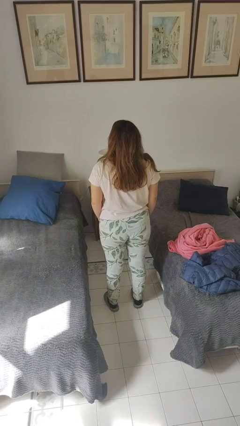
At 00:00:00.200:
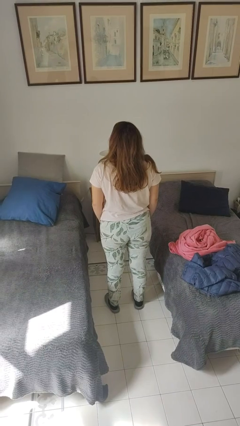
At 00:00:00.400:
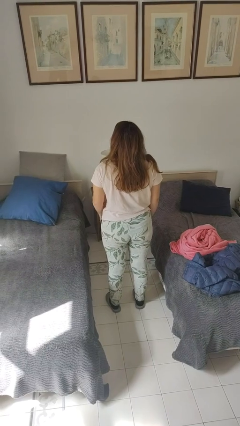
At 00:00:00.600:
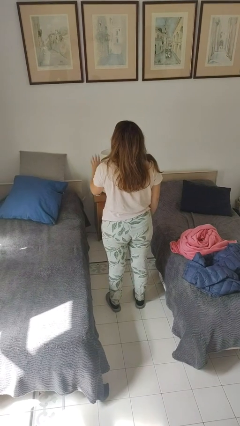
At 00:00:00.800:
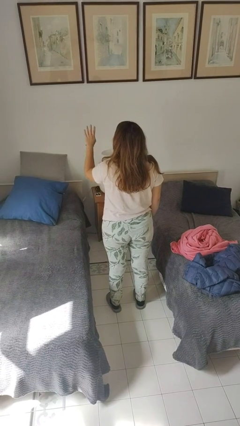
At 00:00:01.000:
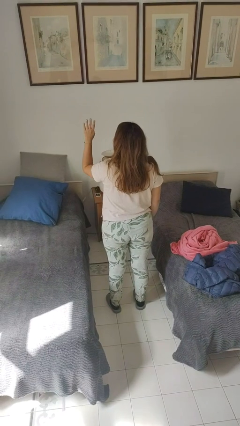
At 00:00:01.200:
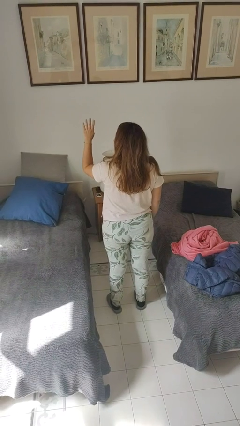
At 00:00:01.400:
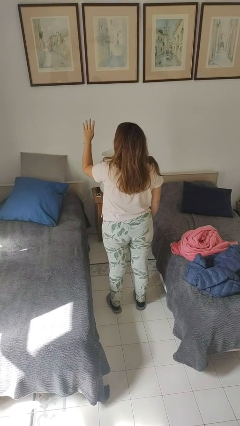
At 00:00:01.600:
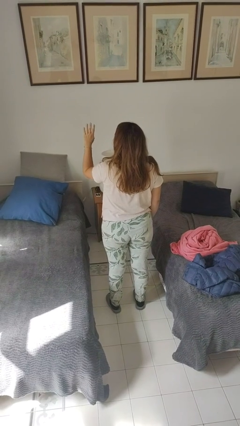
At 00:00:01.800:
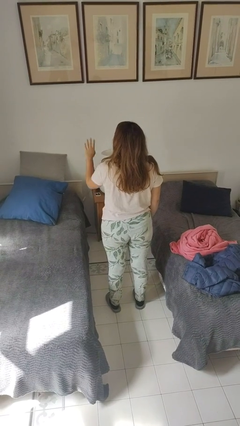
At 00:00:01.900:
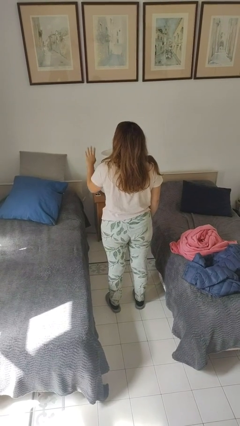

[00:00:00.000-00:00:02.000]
person gestures number four

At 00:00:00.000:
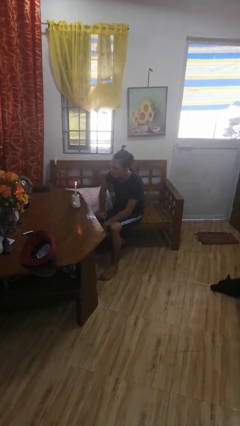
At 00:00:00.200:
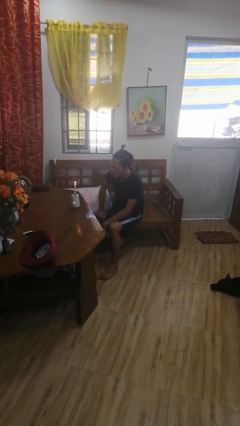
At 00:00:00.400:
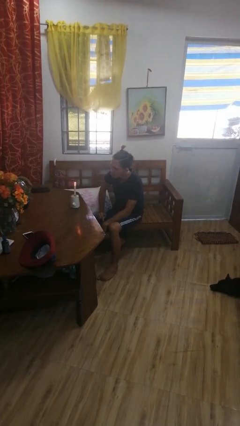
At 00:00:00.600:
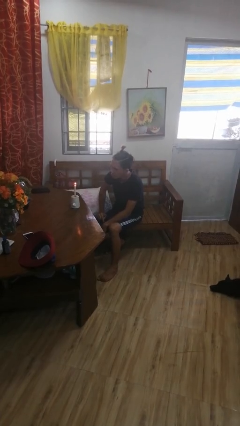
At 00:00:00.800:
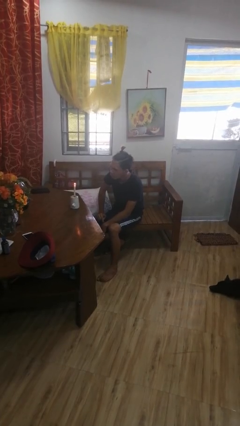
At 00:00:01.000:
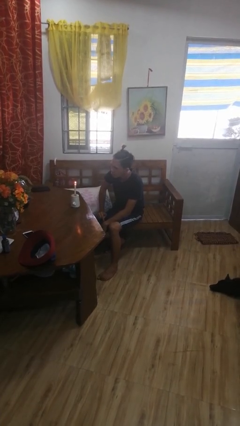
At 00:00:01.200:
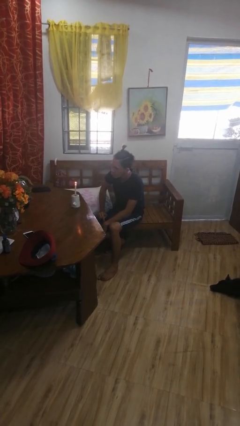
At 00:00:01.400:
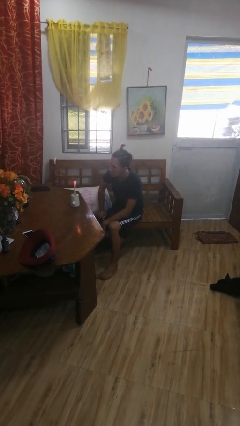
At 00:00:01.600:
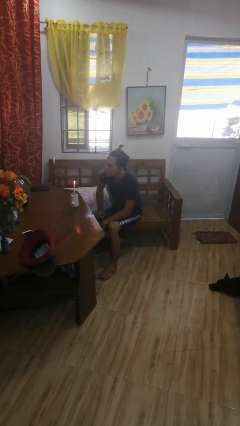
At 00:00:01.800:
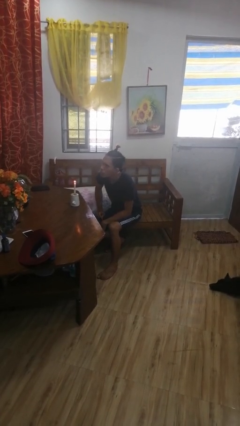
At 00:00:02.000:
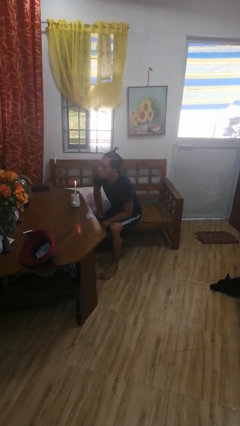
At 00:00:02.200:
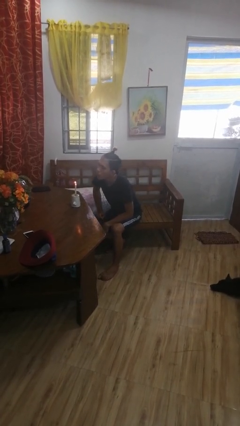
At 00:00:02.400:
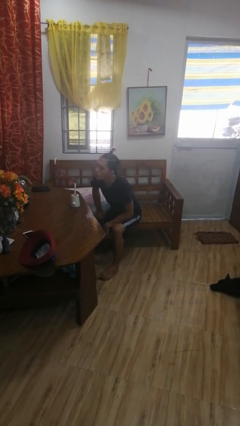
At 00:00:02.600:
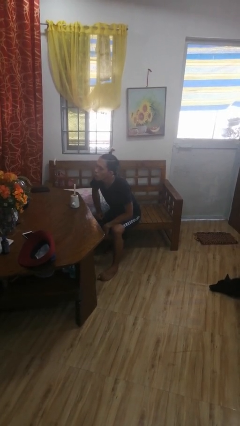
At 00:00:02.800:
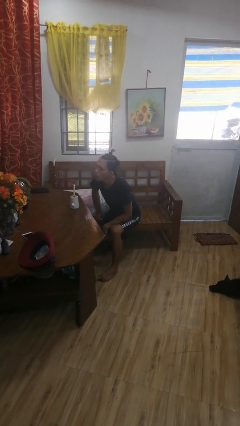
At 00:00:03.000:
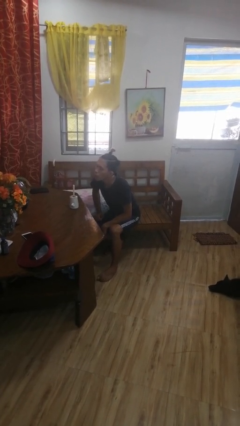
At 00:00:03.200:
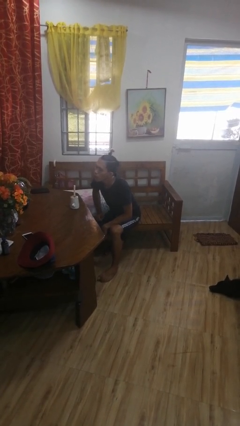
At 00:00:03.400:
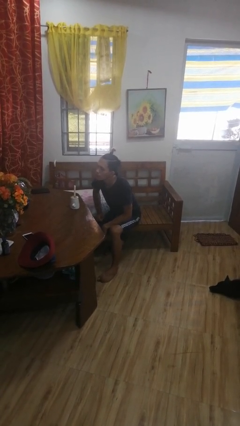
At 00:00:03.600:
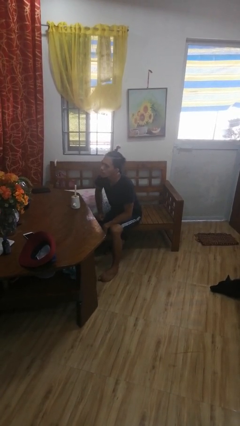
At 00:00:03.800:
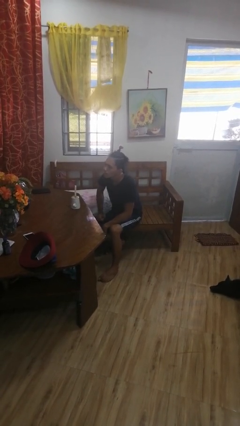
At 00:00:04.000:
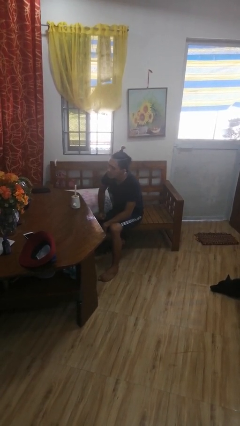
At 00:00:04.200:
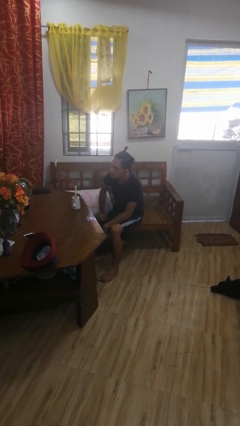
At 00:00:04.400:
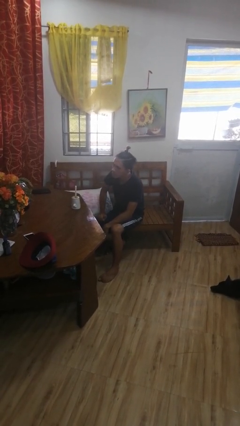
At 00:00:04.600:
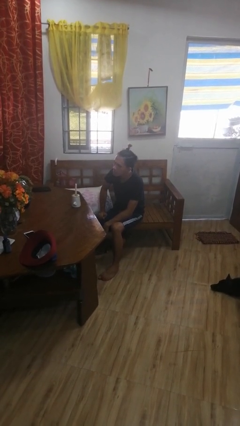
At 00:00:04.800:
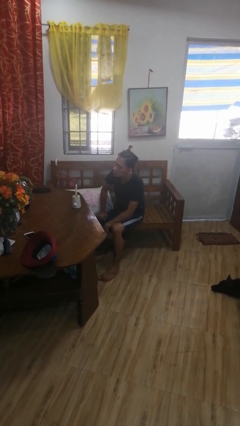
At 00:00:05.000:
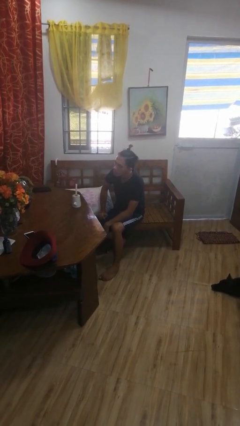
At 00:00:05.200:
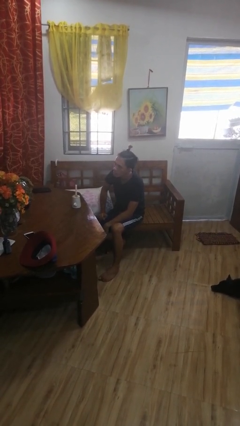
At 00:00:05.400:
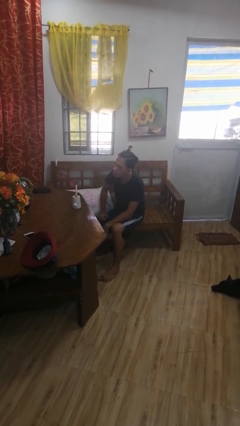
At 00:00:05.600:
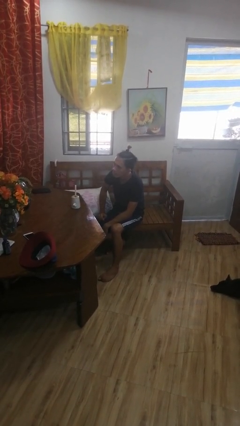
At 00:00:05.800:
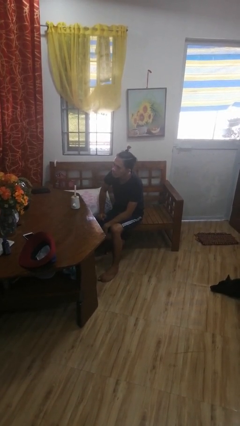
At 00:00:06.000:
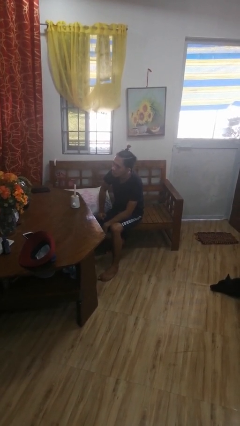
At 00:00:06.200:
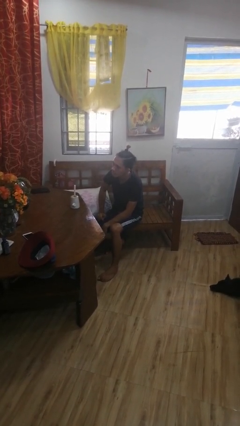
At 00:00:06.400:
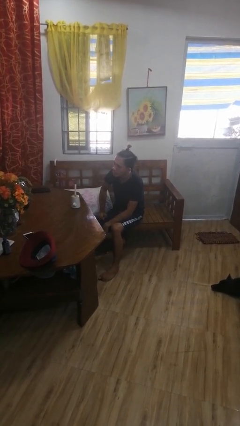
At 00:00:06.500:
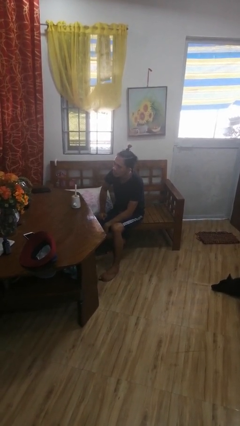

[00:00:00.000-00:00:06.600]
person extinguishes candle

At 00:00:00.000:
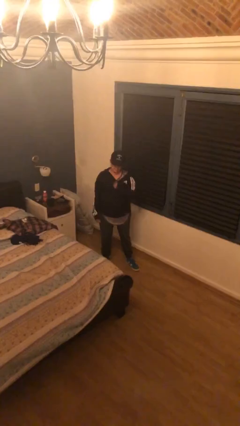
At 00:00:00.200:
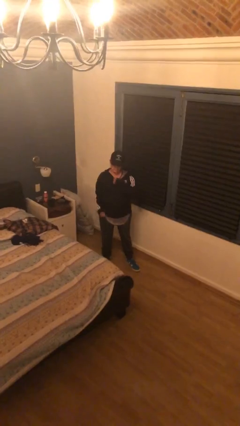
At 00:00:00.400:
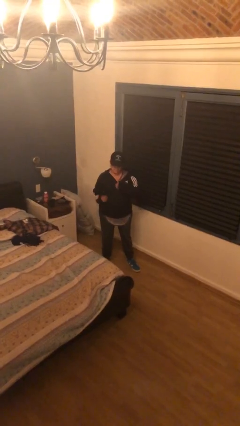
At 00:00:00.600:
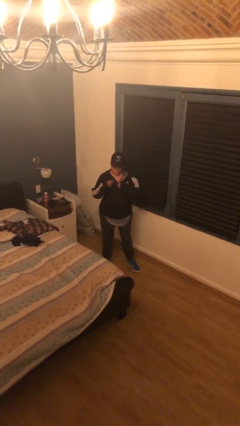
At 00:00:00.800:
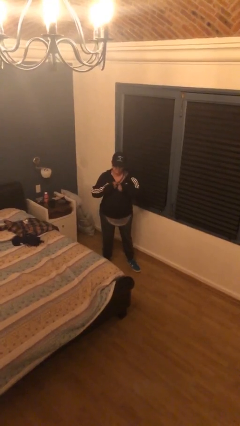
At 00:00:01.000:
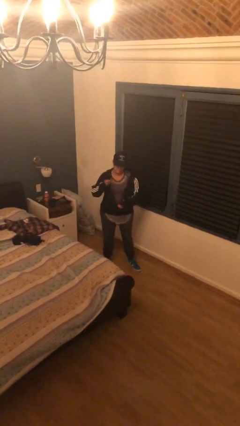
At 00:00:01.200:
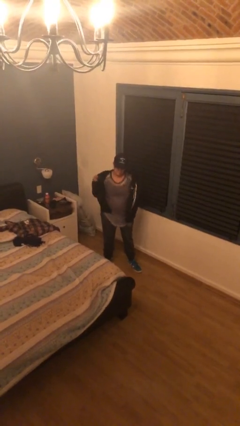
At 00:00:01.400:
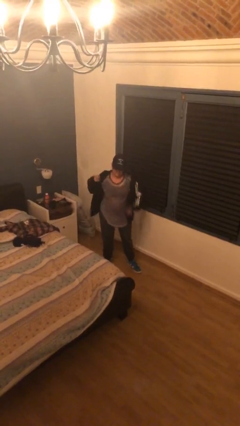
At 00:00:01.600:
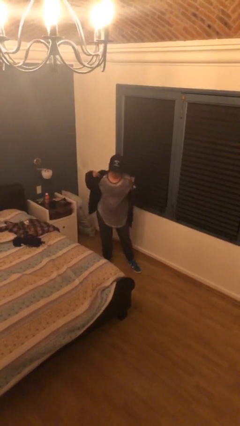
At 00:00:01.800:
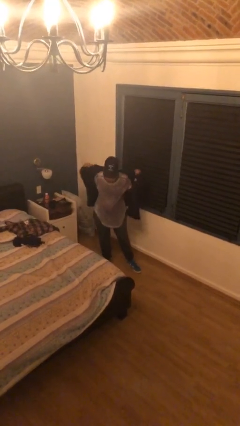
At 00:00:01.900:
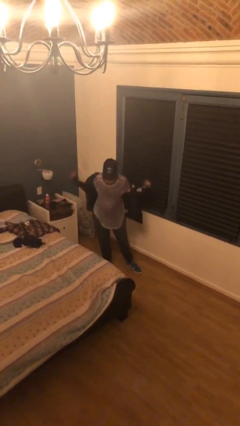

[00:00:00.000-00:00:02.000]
person unzips jacket

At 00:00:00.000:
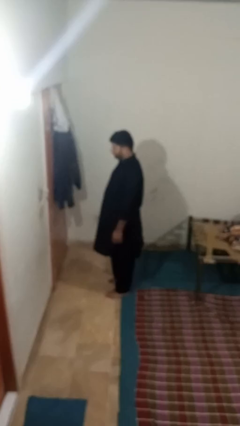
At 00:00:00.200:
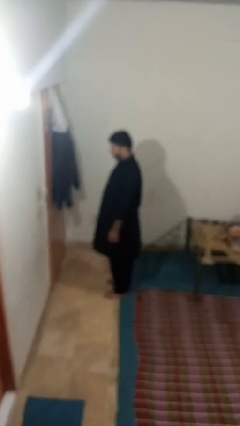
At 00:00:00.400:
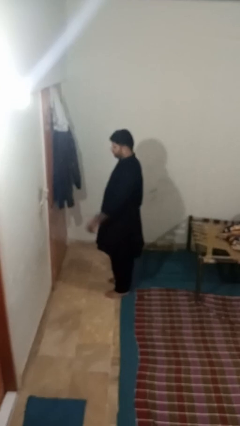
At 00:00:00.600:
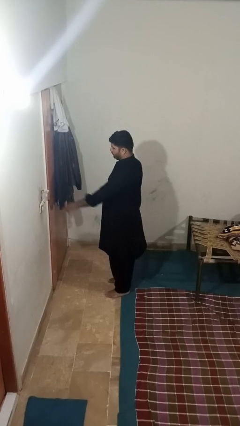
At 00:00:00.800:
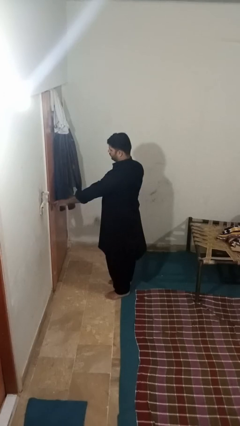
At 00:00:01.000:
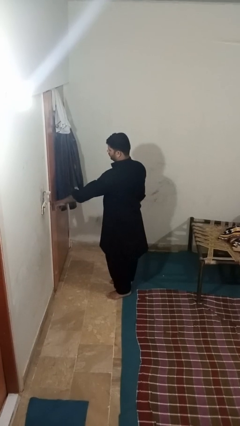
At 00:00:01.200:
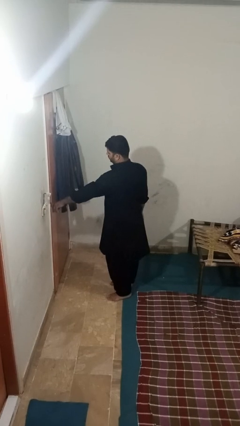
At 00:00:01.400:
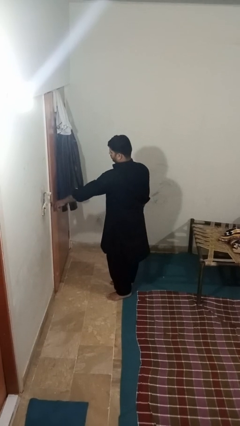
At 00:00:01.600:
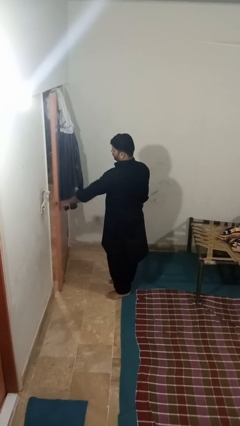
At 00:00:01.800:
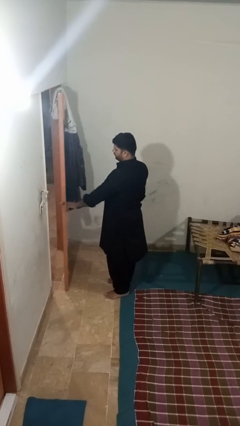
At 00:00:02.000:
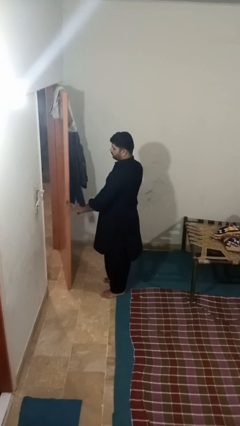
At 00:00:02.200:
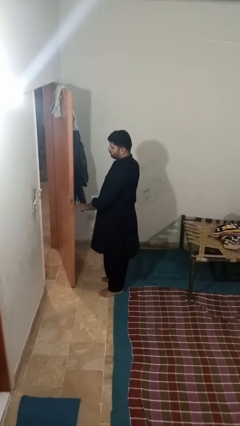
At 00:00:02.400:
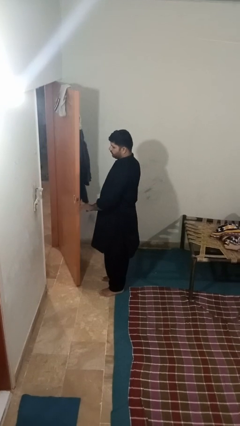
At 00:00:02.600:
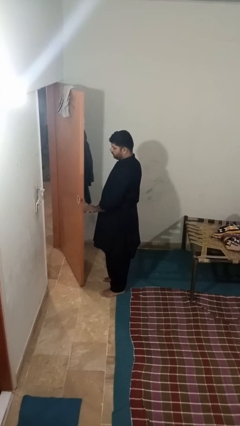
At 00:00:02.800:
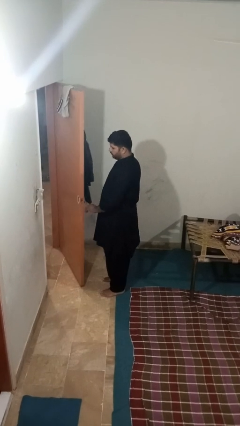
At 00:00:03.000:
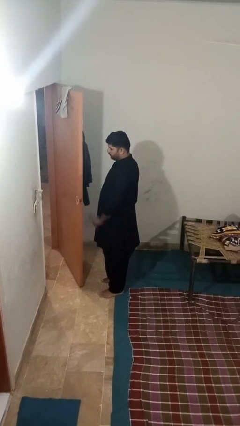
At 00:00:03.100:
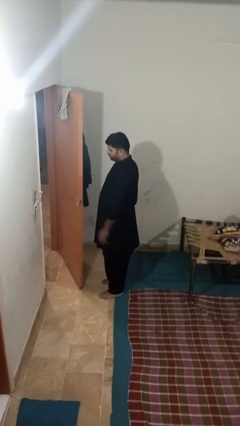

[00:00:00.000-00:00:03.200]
person opens facility door

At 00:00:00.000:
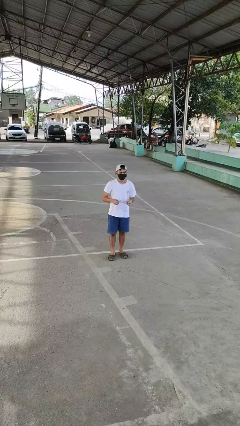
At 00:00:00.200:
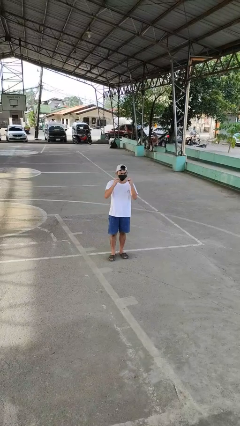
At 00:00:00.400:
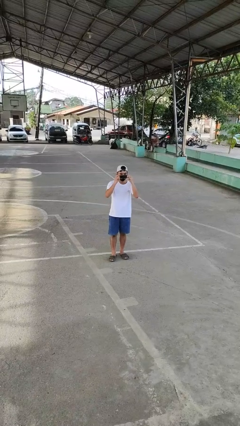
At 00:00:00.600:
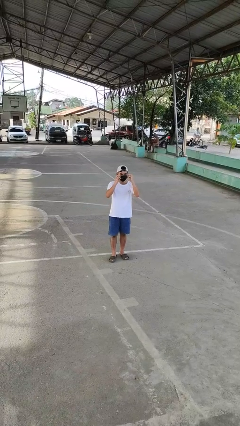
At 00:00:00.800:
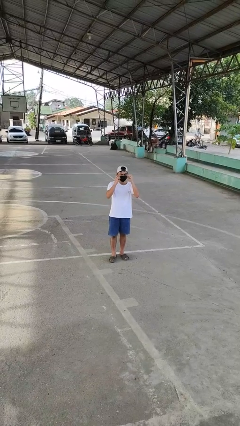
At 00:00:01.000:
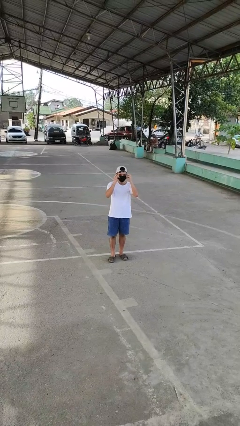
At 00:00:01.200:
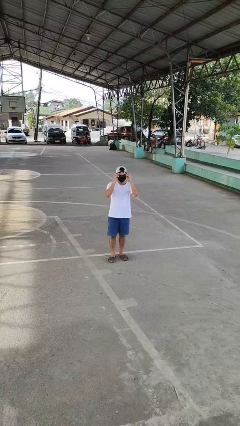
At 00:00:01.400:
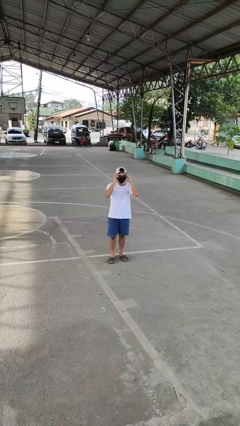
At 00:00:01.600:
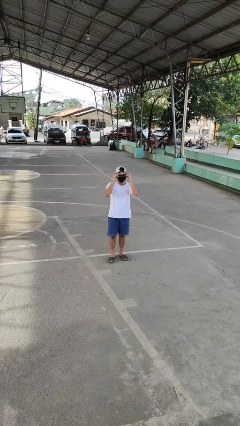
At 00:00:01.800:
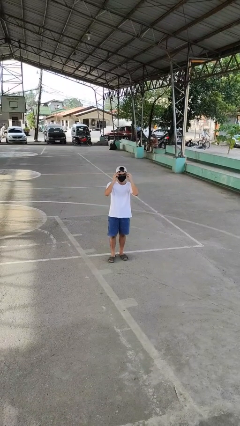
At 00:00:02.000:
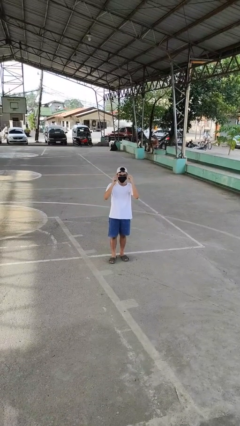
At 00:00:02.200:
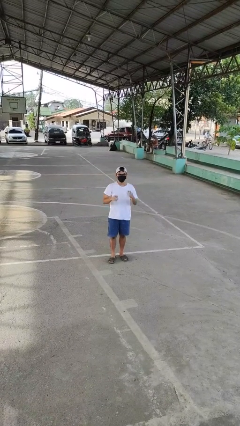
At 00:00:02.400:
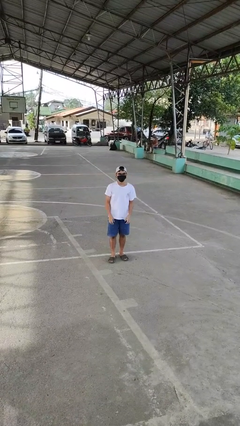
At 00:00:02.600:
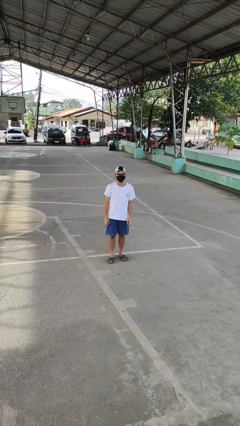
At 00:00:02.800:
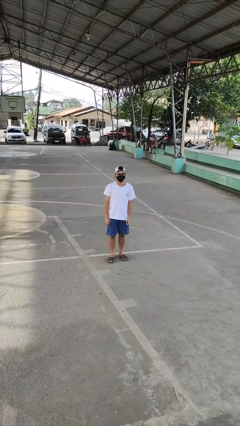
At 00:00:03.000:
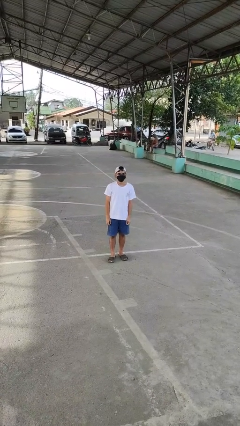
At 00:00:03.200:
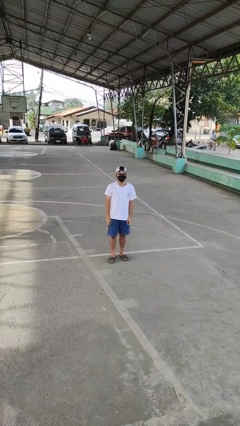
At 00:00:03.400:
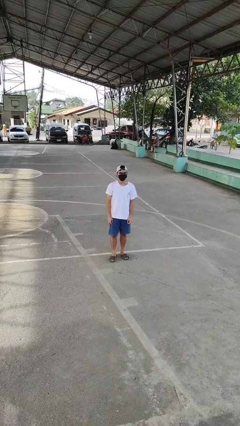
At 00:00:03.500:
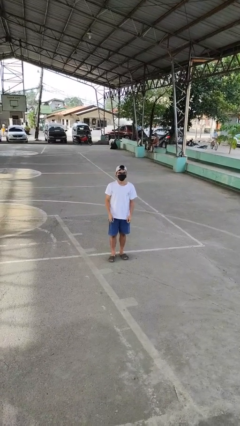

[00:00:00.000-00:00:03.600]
person puts on glasses

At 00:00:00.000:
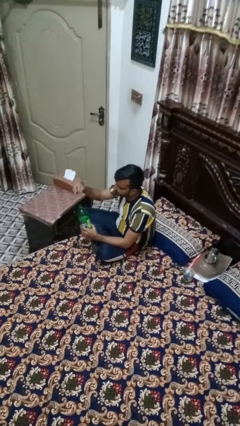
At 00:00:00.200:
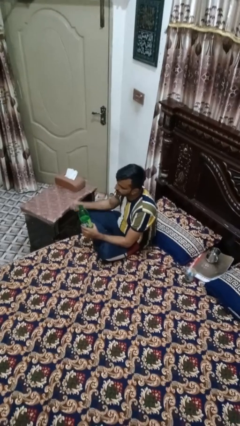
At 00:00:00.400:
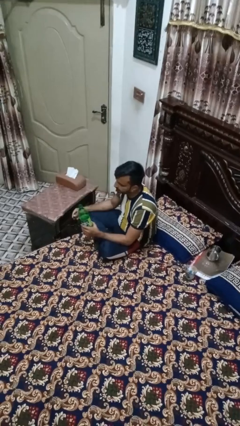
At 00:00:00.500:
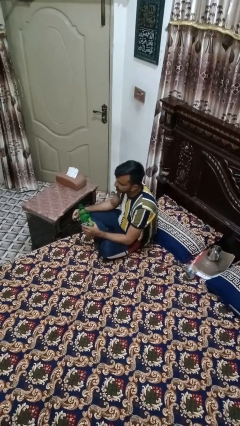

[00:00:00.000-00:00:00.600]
person screws lid to bottle
